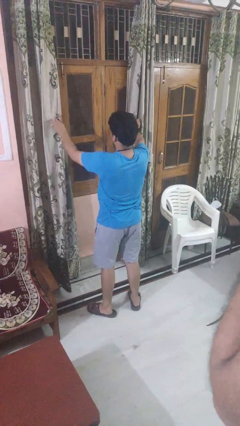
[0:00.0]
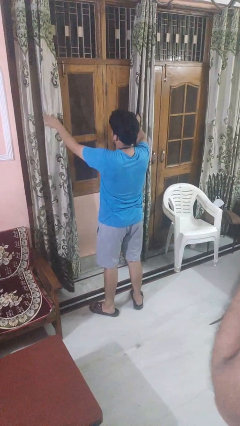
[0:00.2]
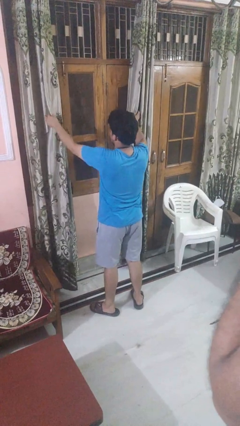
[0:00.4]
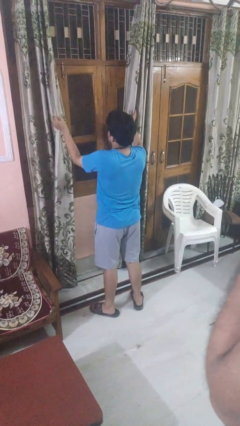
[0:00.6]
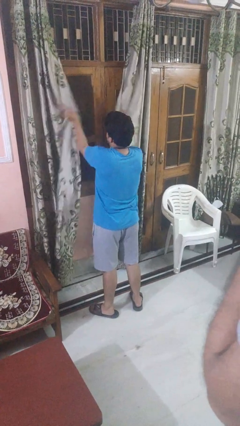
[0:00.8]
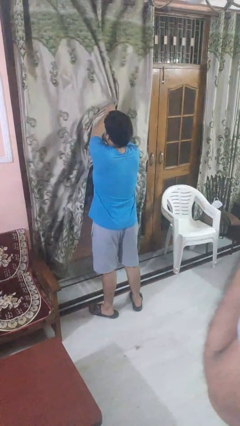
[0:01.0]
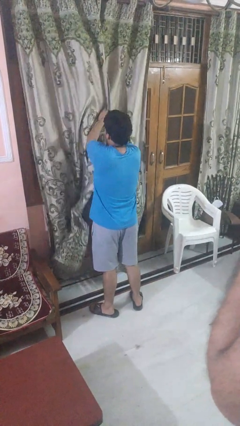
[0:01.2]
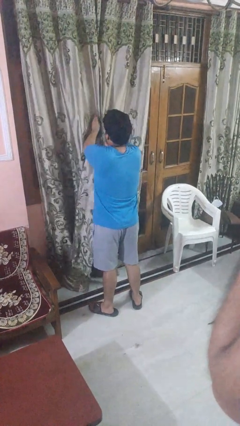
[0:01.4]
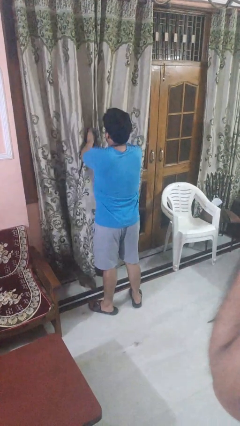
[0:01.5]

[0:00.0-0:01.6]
person closes curtains

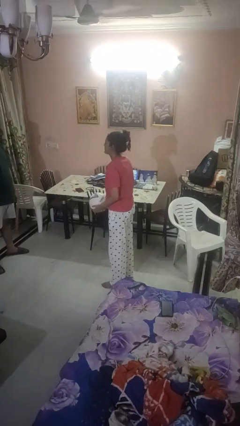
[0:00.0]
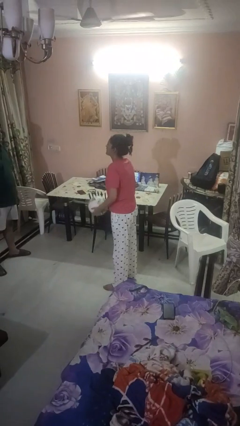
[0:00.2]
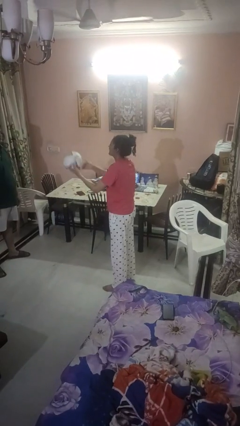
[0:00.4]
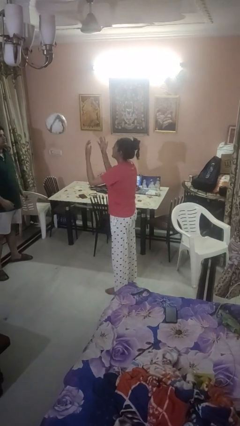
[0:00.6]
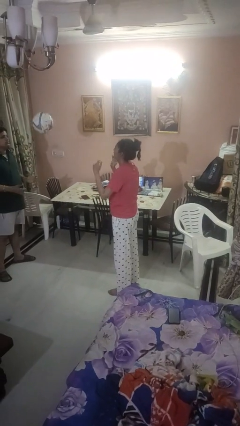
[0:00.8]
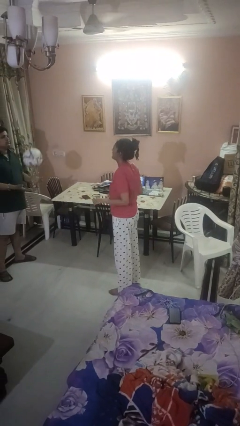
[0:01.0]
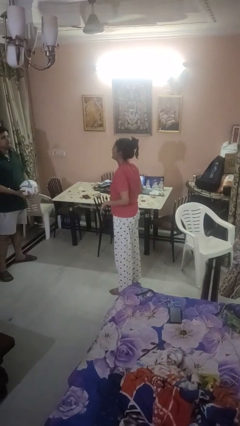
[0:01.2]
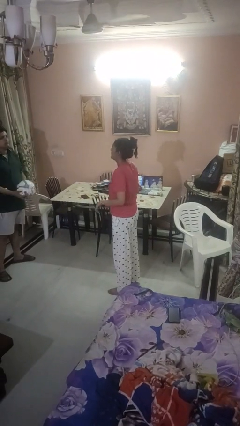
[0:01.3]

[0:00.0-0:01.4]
person throws object to person

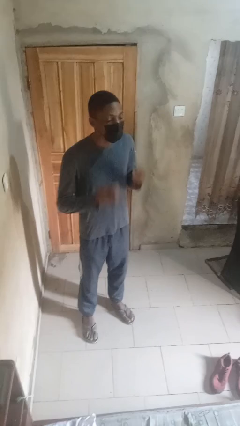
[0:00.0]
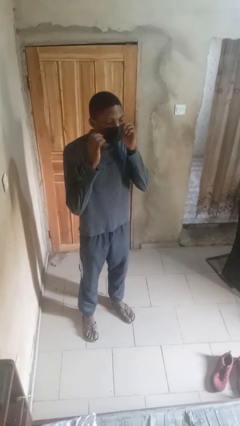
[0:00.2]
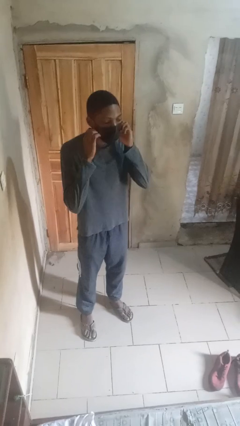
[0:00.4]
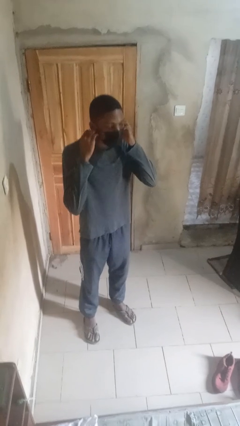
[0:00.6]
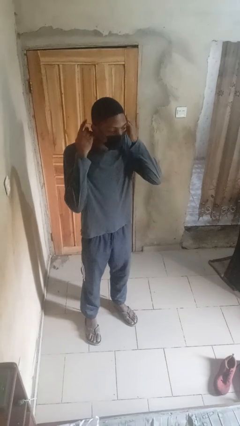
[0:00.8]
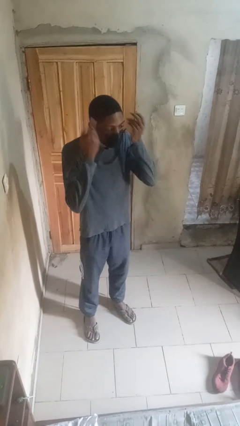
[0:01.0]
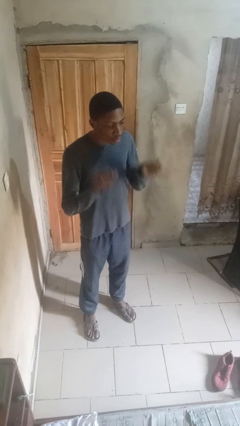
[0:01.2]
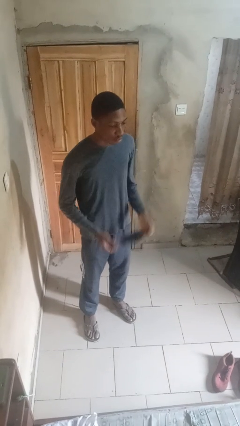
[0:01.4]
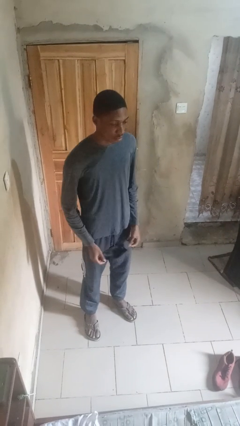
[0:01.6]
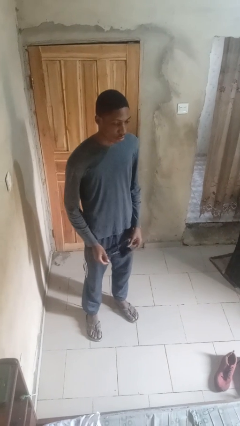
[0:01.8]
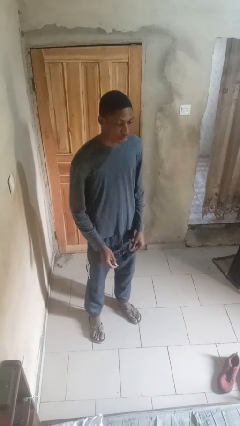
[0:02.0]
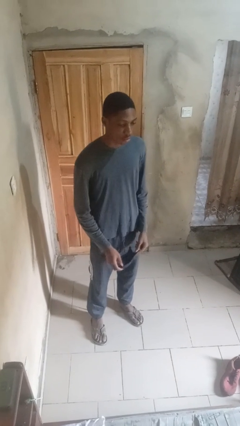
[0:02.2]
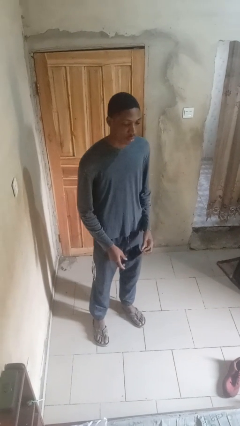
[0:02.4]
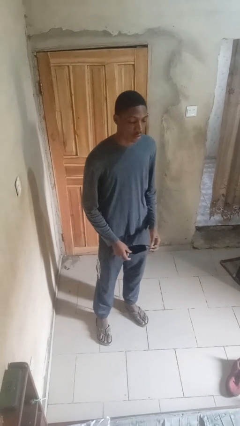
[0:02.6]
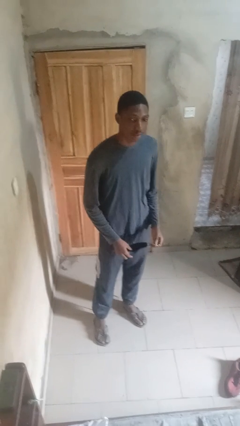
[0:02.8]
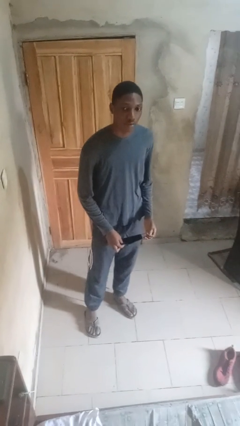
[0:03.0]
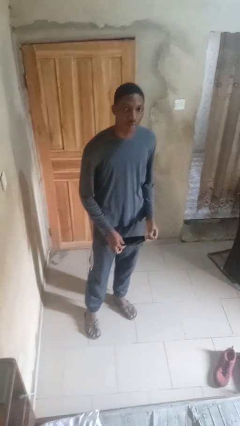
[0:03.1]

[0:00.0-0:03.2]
person takes off facemask

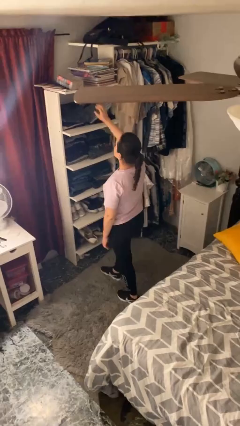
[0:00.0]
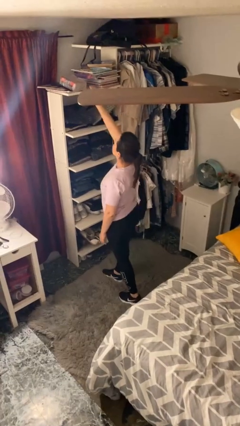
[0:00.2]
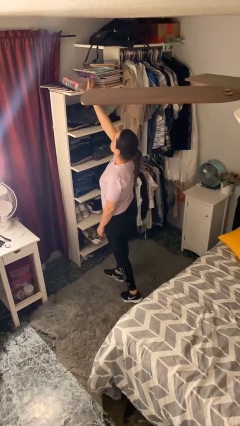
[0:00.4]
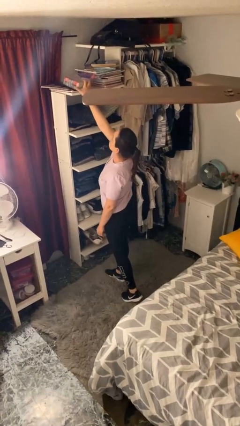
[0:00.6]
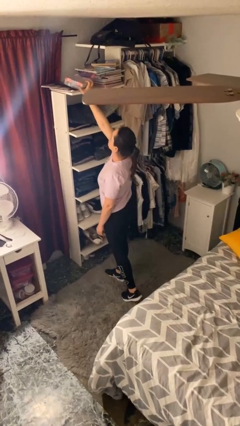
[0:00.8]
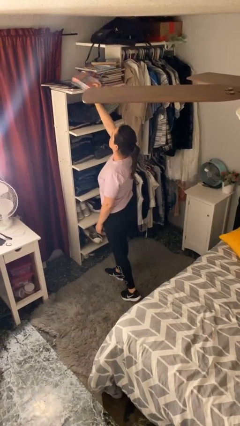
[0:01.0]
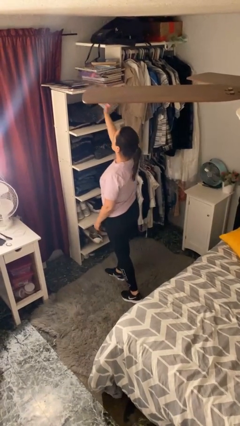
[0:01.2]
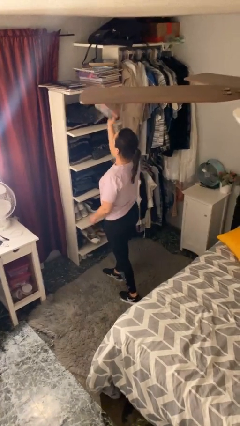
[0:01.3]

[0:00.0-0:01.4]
person picks up object from shelf

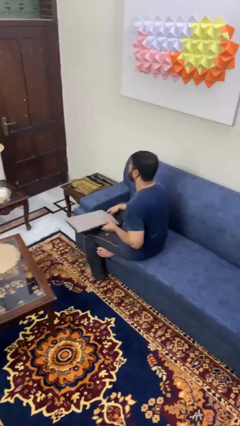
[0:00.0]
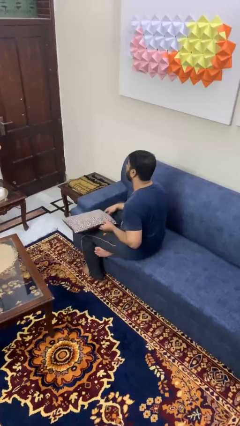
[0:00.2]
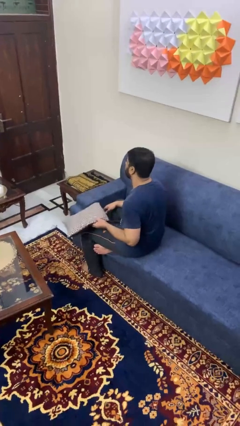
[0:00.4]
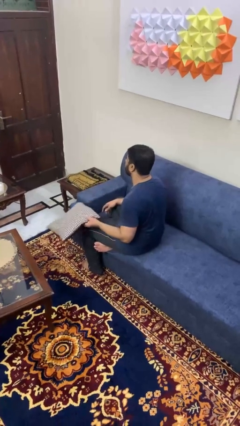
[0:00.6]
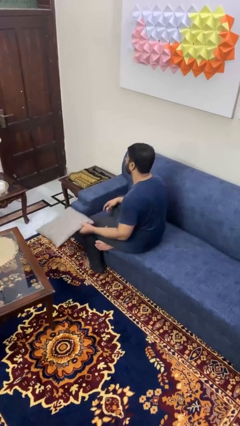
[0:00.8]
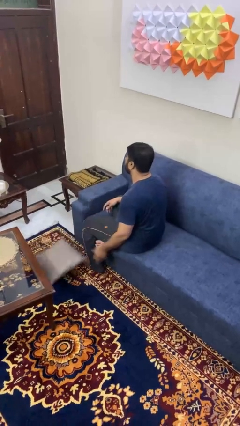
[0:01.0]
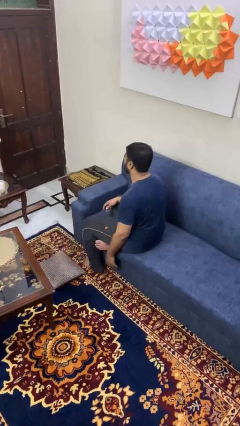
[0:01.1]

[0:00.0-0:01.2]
person throws object to ground

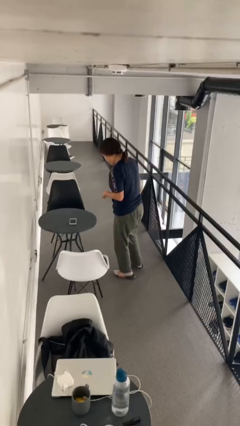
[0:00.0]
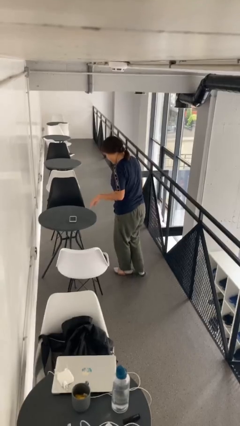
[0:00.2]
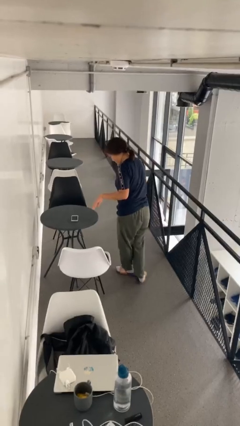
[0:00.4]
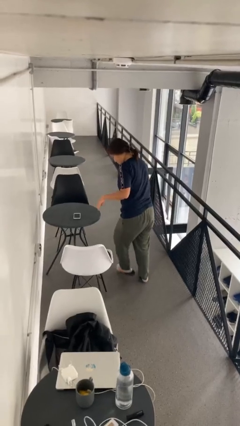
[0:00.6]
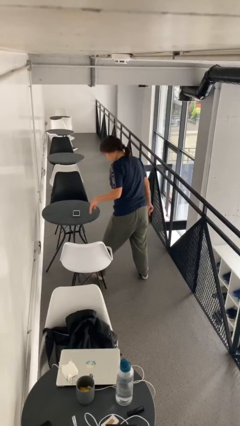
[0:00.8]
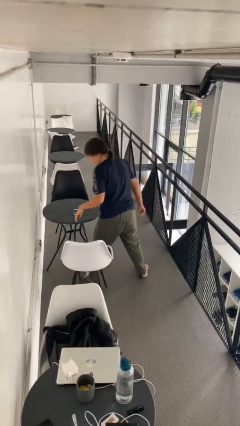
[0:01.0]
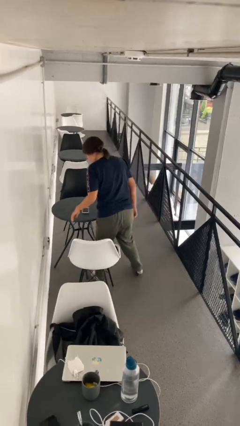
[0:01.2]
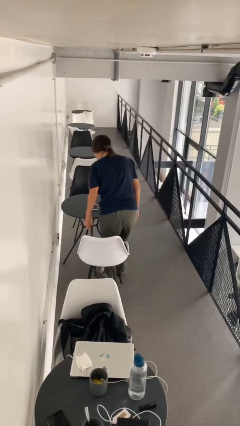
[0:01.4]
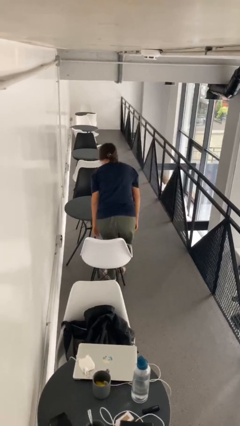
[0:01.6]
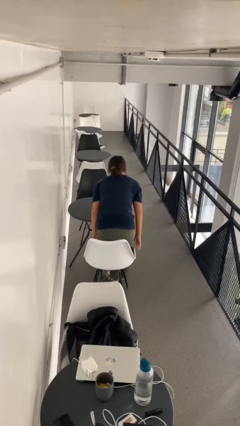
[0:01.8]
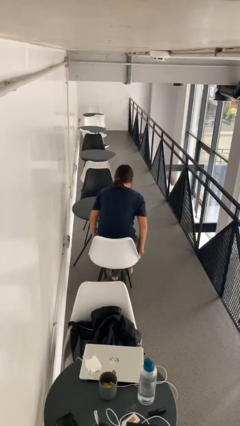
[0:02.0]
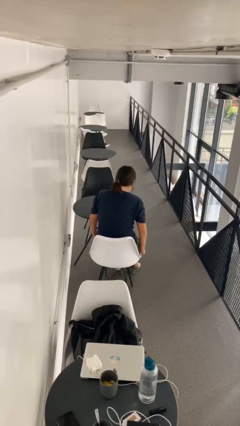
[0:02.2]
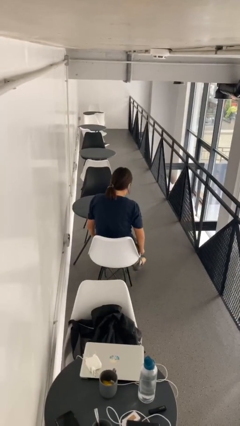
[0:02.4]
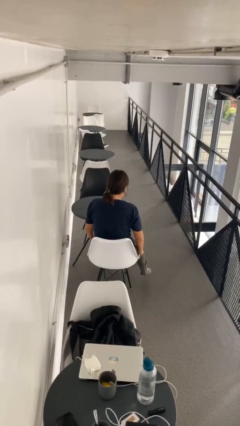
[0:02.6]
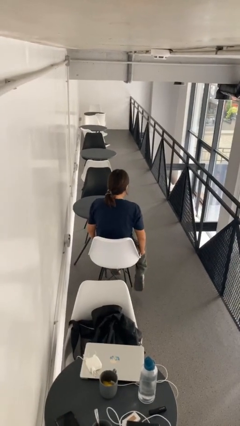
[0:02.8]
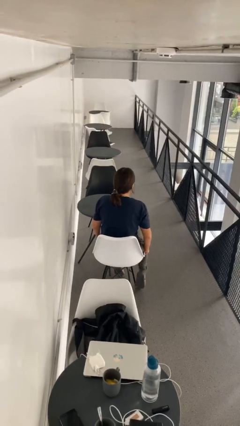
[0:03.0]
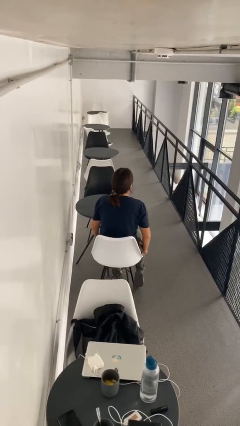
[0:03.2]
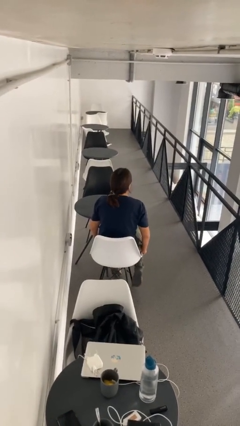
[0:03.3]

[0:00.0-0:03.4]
person sits down

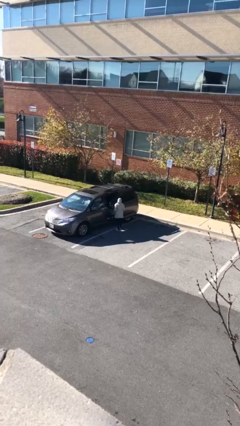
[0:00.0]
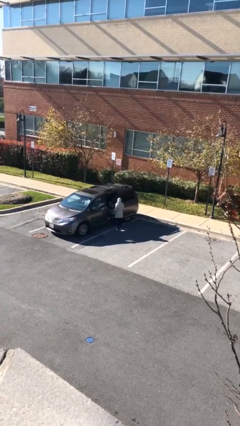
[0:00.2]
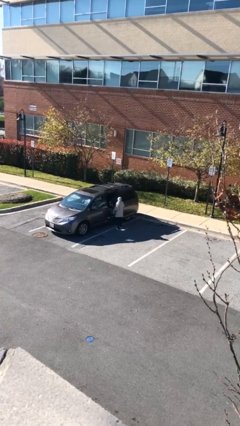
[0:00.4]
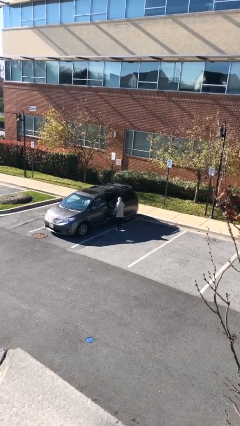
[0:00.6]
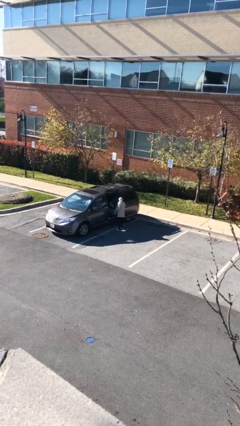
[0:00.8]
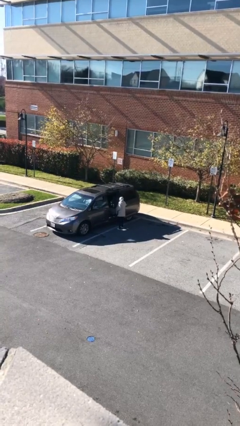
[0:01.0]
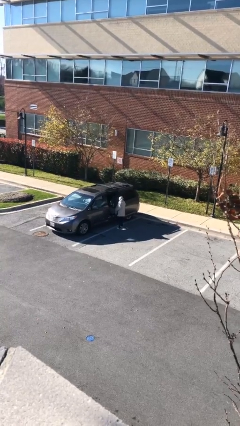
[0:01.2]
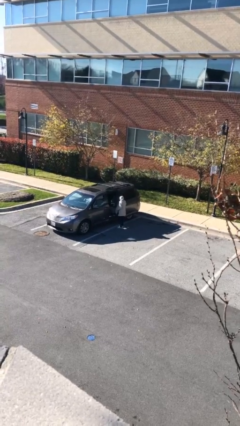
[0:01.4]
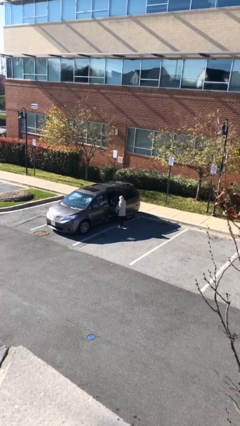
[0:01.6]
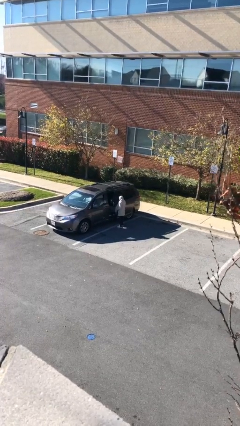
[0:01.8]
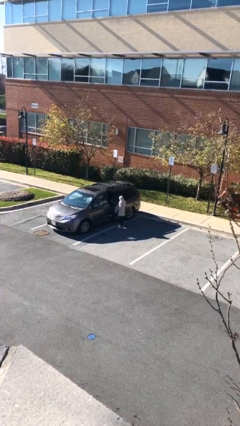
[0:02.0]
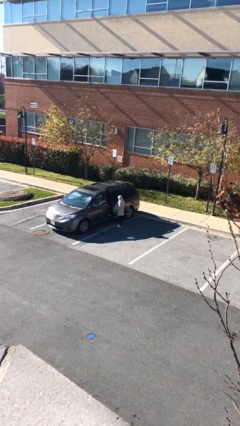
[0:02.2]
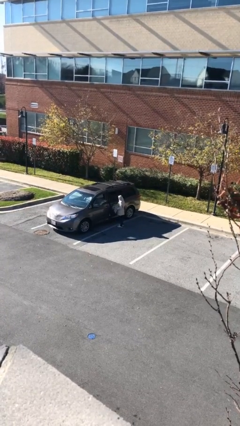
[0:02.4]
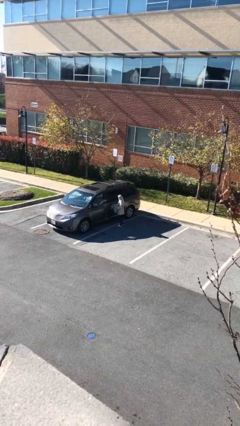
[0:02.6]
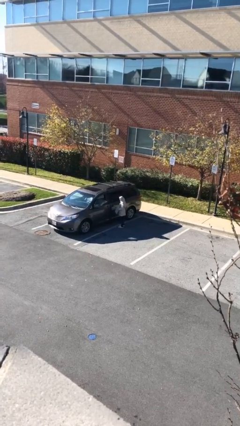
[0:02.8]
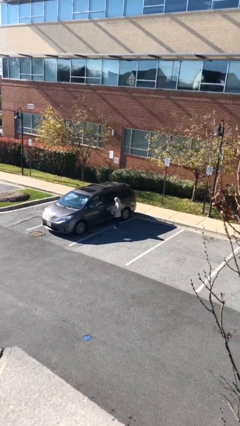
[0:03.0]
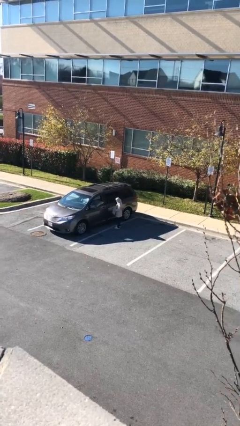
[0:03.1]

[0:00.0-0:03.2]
person closes car door

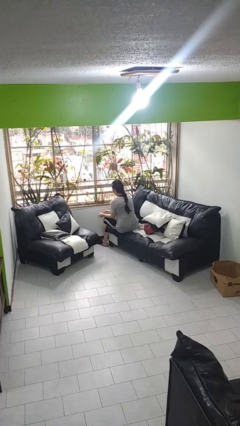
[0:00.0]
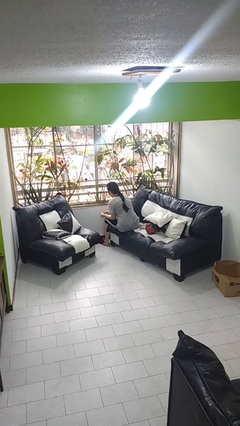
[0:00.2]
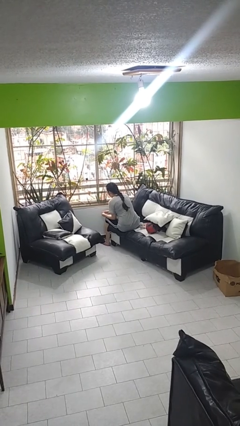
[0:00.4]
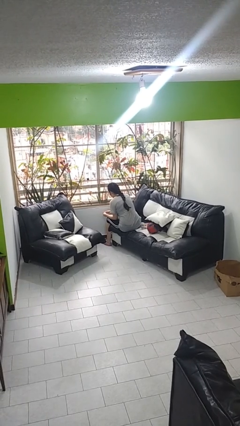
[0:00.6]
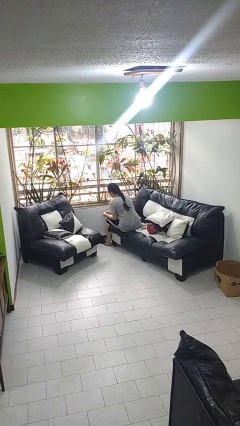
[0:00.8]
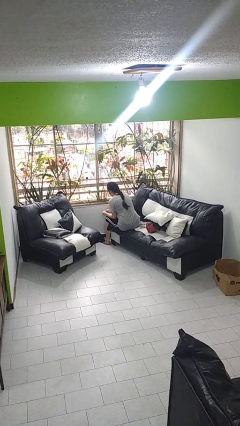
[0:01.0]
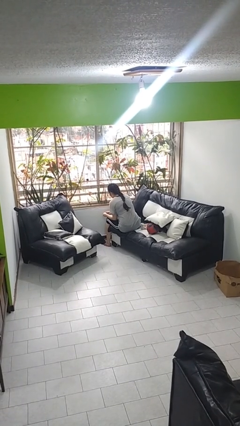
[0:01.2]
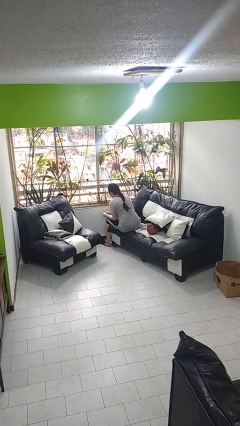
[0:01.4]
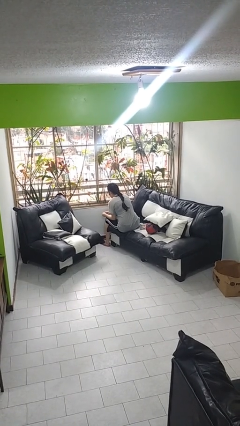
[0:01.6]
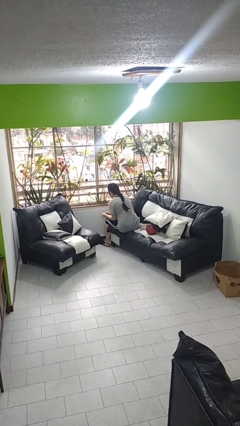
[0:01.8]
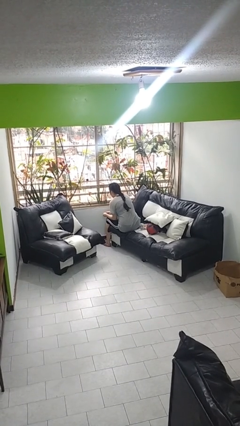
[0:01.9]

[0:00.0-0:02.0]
person looks at hands in lap
